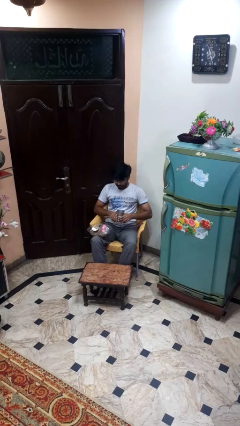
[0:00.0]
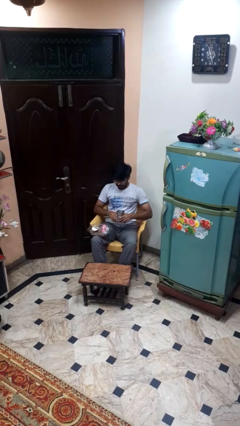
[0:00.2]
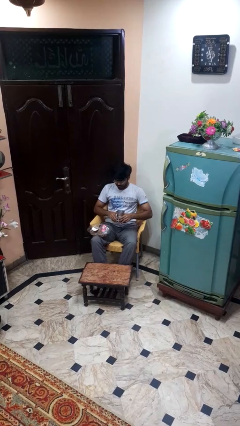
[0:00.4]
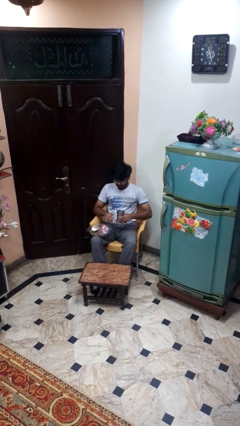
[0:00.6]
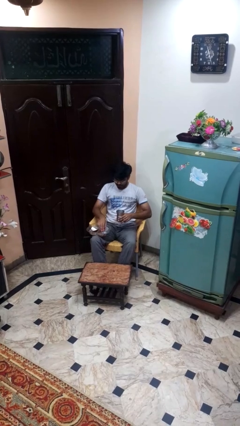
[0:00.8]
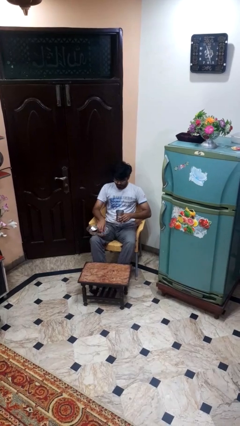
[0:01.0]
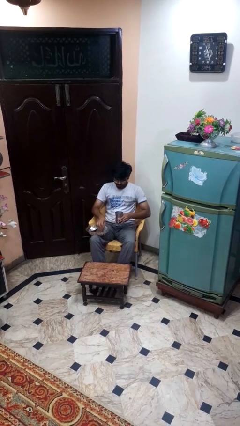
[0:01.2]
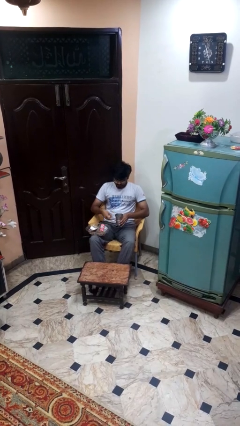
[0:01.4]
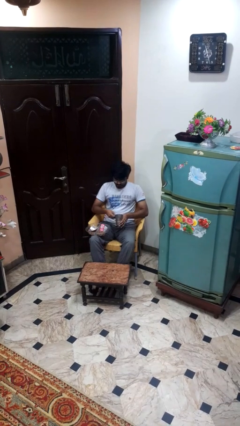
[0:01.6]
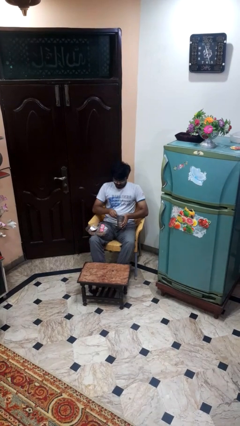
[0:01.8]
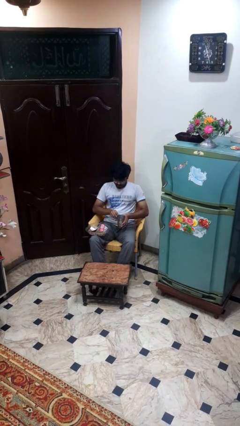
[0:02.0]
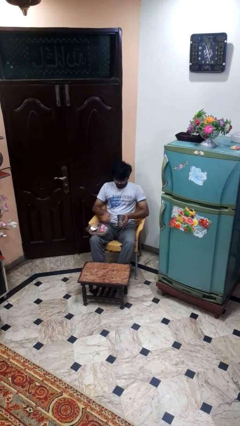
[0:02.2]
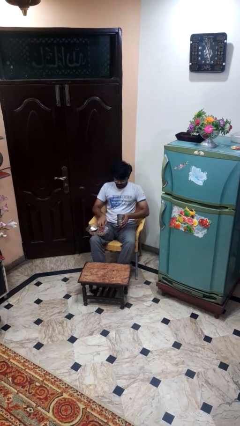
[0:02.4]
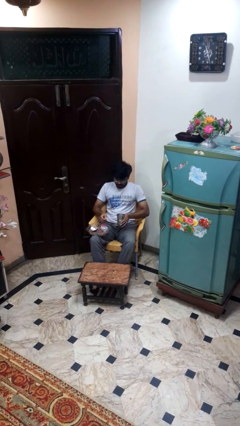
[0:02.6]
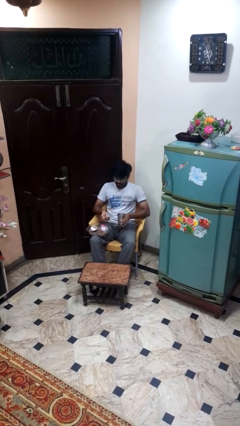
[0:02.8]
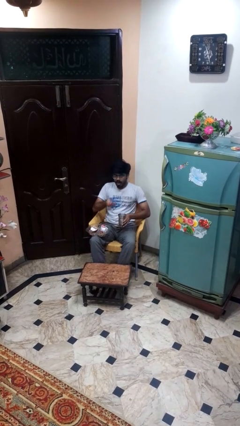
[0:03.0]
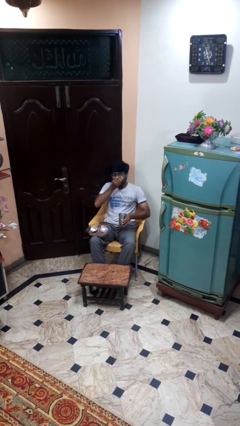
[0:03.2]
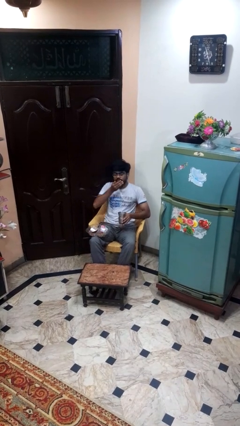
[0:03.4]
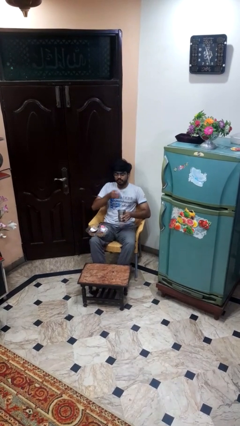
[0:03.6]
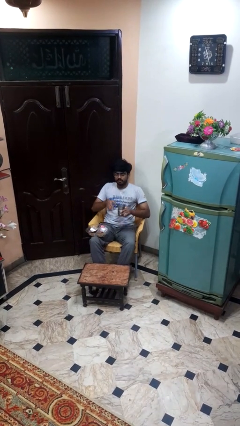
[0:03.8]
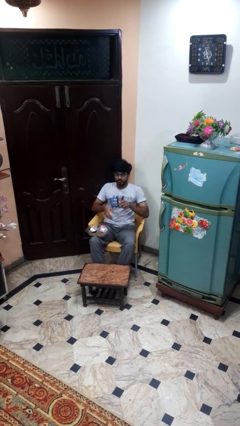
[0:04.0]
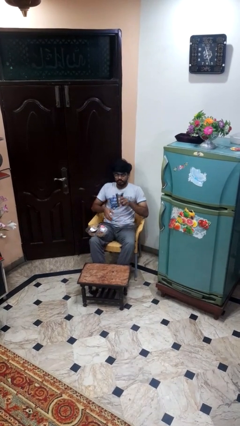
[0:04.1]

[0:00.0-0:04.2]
person takes medicine pills

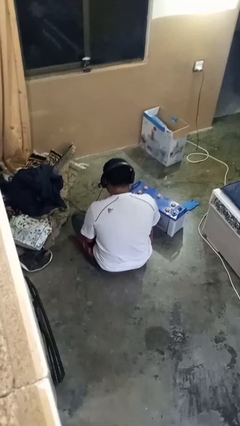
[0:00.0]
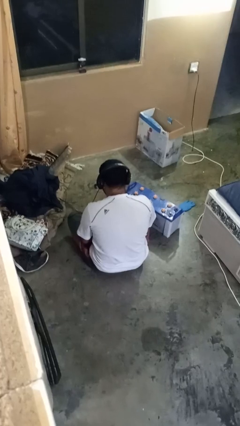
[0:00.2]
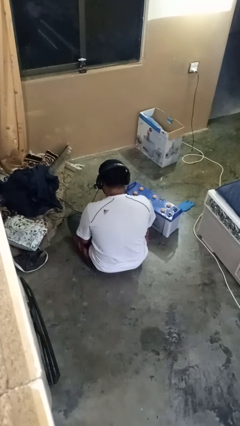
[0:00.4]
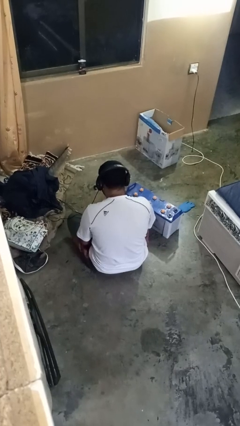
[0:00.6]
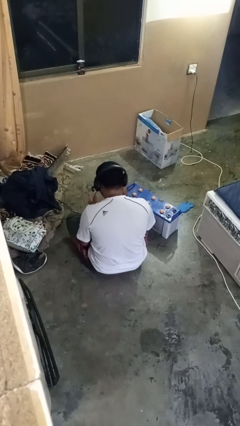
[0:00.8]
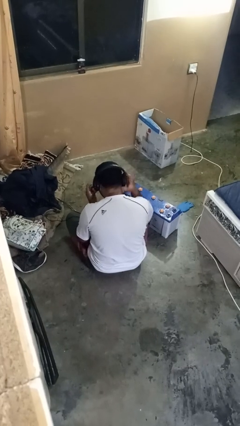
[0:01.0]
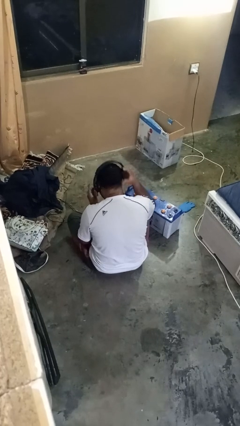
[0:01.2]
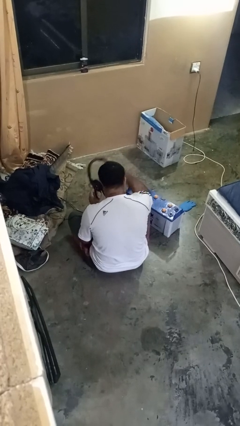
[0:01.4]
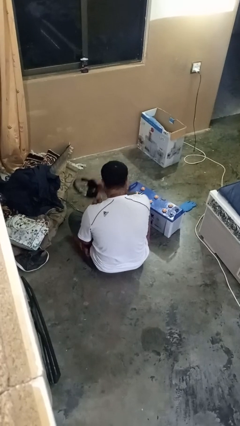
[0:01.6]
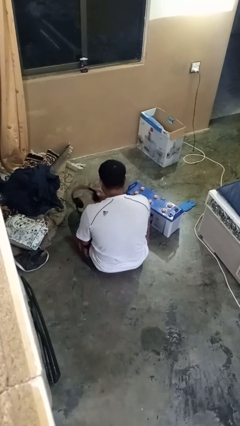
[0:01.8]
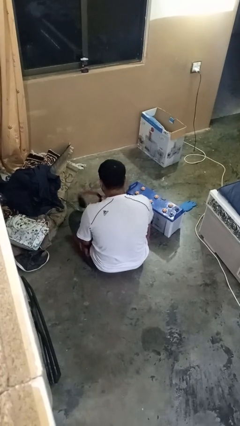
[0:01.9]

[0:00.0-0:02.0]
person takes off headphones

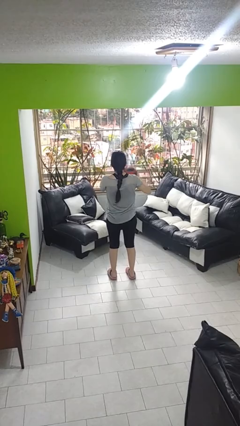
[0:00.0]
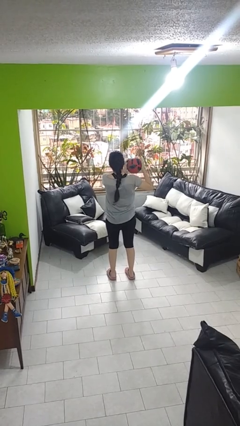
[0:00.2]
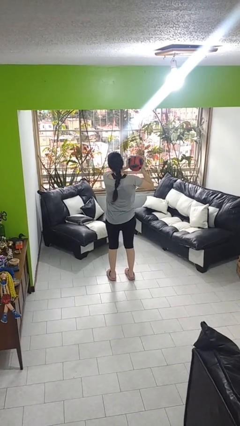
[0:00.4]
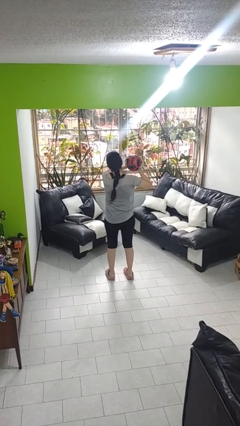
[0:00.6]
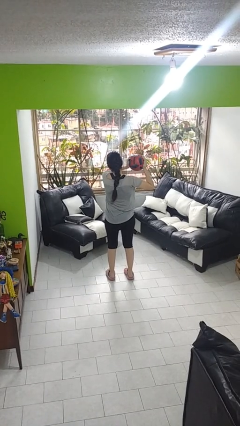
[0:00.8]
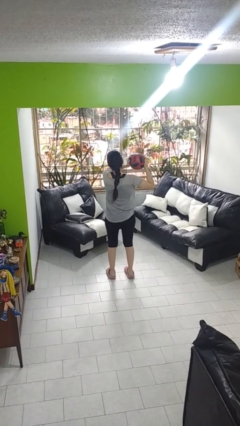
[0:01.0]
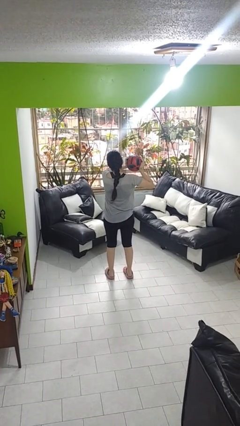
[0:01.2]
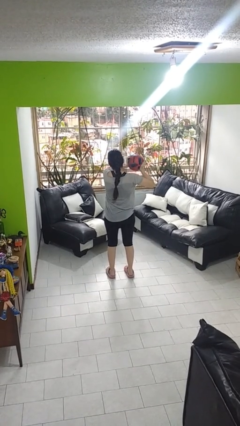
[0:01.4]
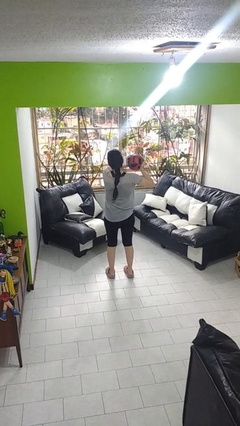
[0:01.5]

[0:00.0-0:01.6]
person squeezes object

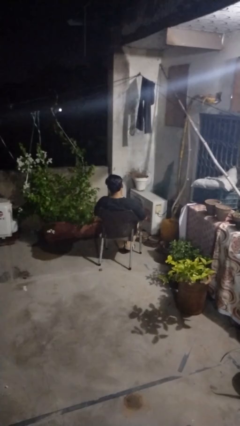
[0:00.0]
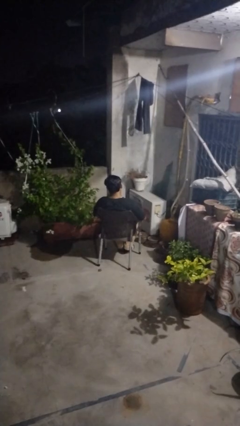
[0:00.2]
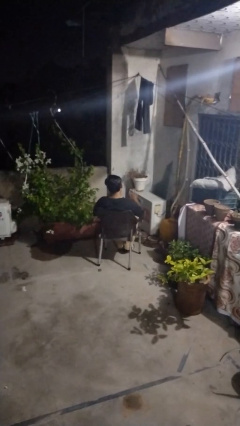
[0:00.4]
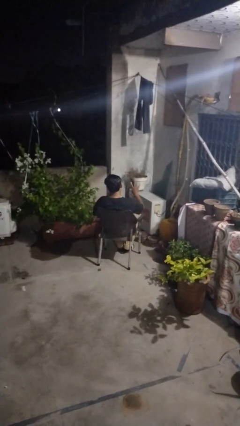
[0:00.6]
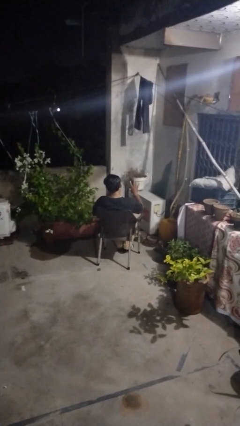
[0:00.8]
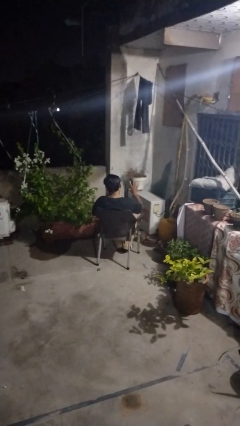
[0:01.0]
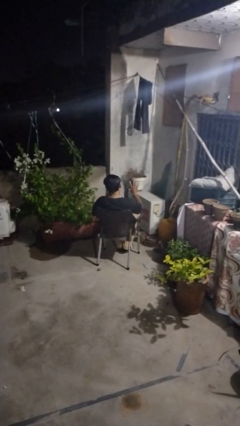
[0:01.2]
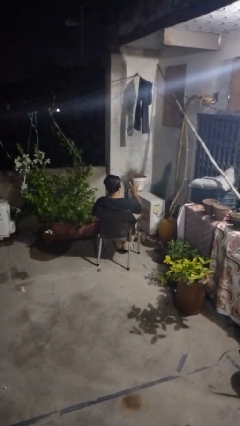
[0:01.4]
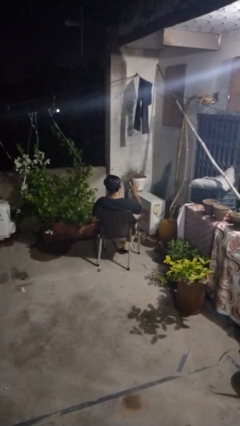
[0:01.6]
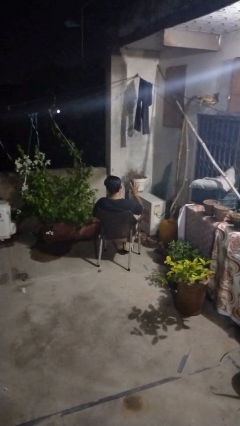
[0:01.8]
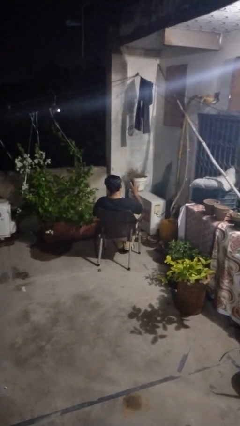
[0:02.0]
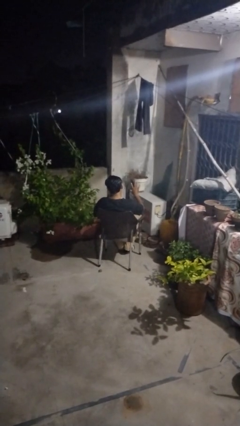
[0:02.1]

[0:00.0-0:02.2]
person gestures number four

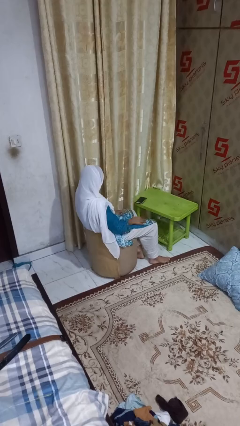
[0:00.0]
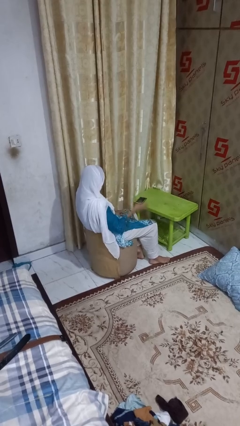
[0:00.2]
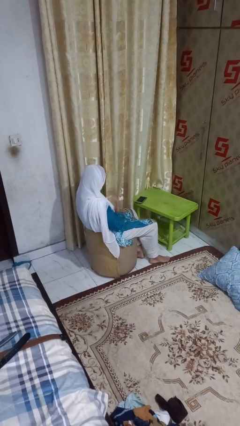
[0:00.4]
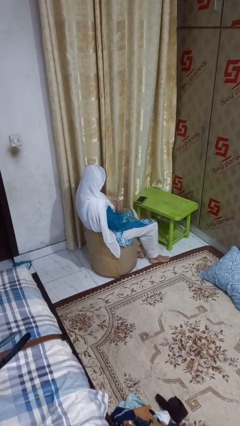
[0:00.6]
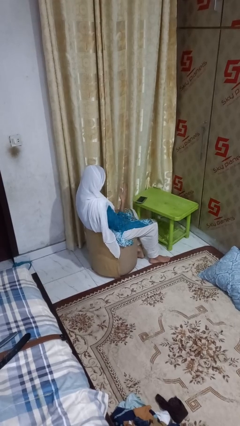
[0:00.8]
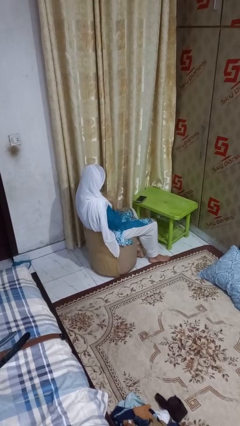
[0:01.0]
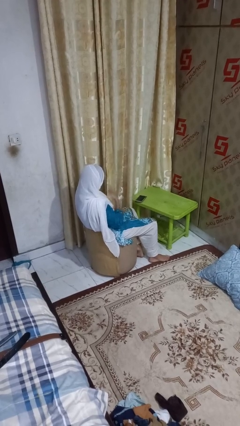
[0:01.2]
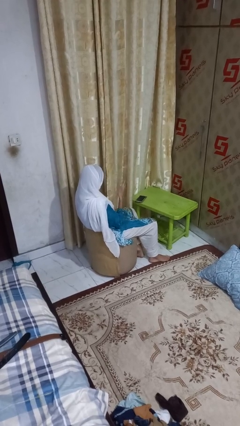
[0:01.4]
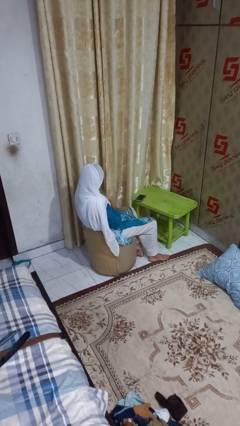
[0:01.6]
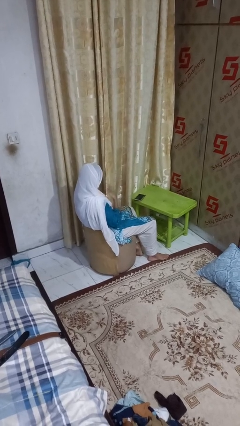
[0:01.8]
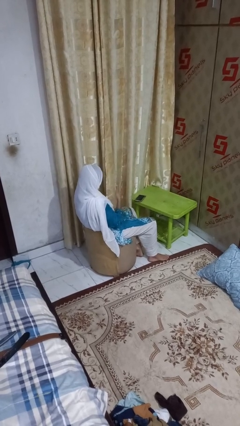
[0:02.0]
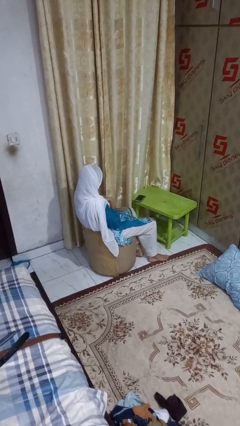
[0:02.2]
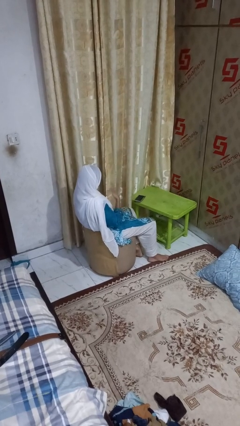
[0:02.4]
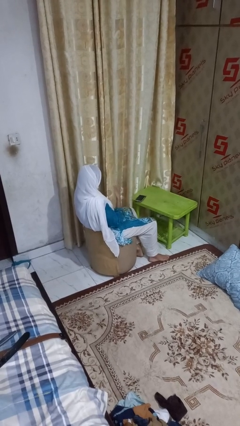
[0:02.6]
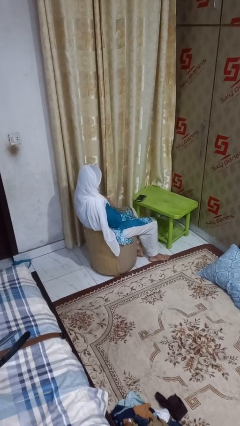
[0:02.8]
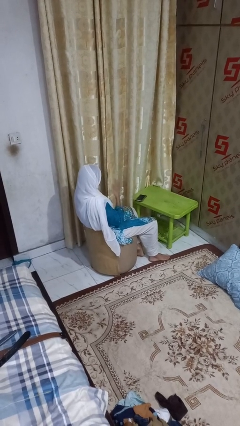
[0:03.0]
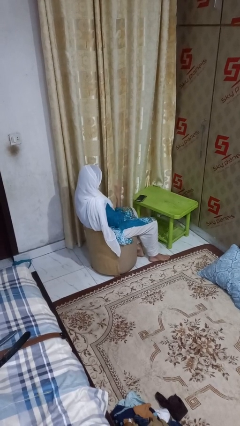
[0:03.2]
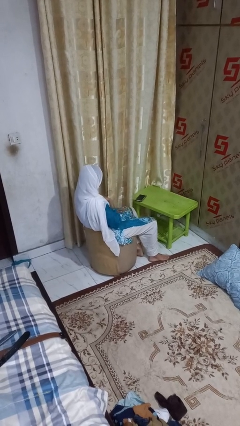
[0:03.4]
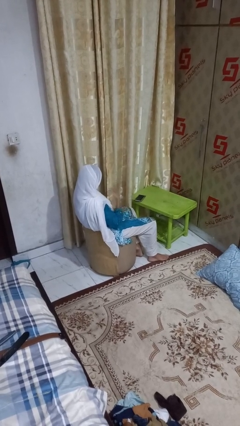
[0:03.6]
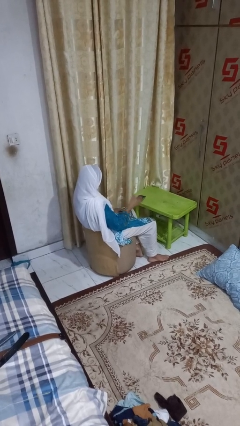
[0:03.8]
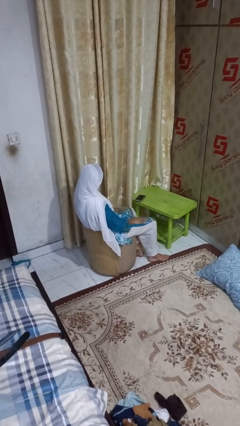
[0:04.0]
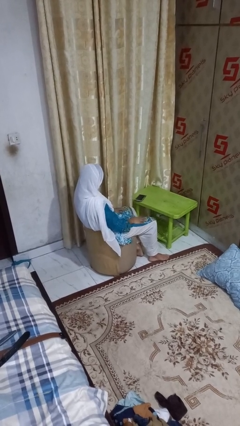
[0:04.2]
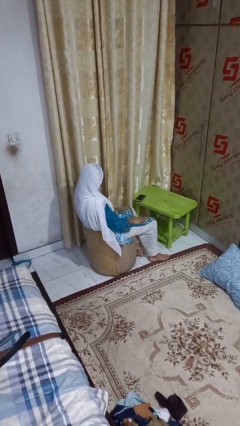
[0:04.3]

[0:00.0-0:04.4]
person drums on chest

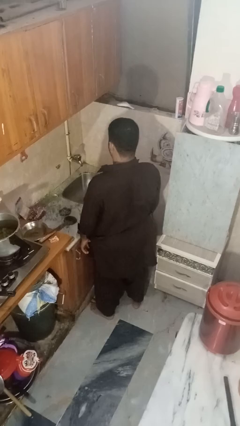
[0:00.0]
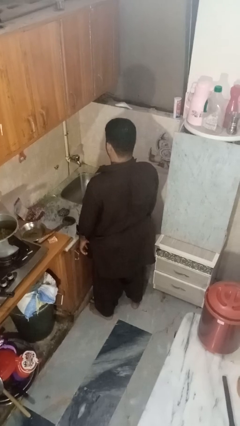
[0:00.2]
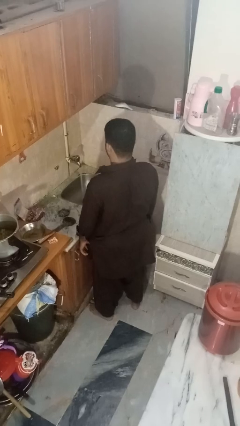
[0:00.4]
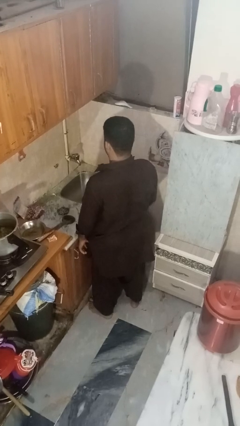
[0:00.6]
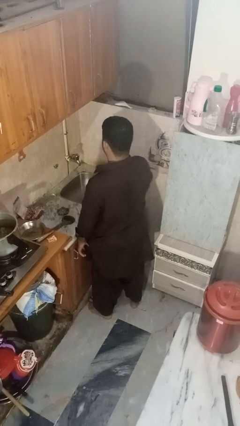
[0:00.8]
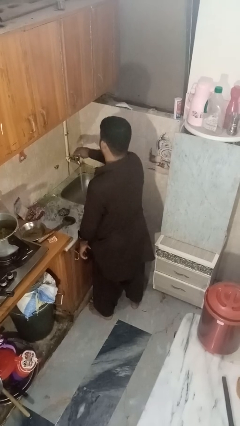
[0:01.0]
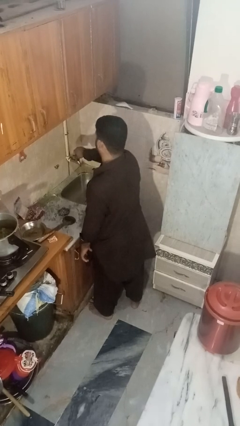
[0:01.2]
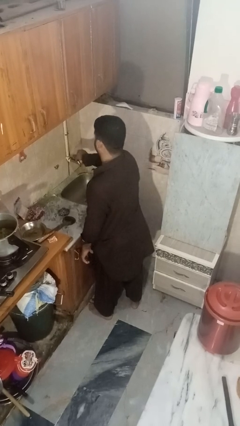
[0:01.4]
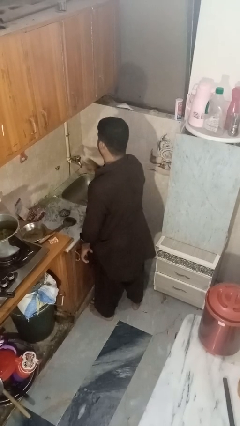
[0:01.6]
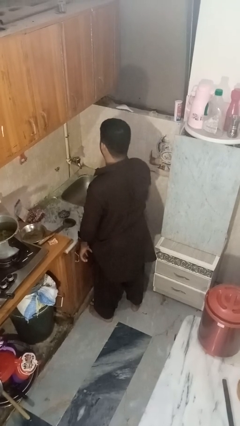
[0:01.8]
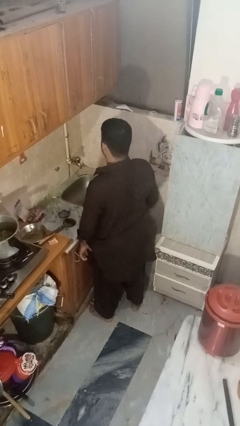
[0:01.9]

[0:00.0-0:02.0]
person turns off faucet

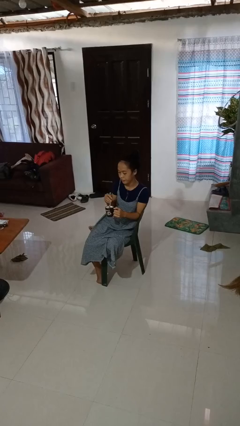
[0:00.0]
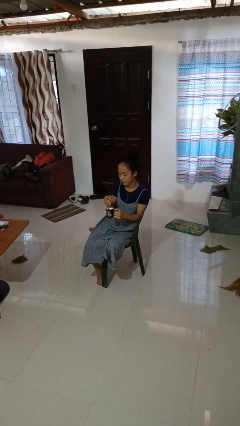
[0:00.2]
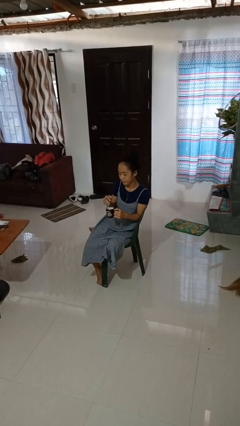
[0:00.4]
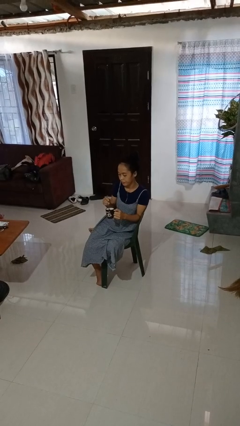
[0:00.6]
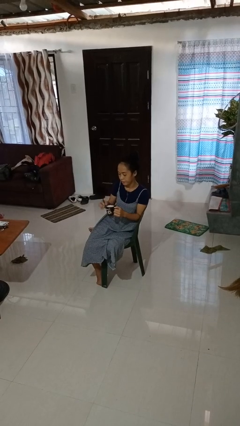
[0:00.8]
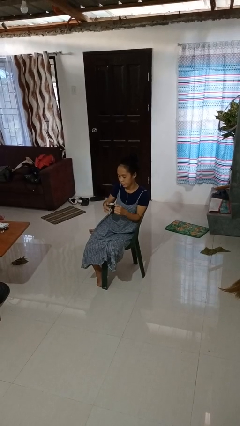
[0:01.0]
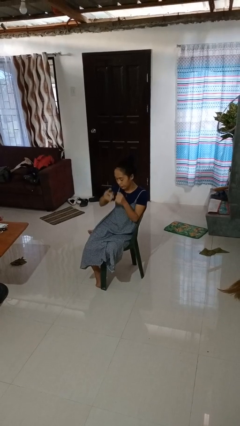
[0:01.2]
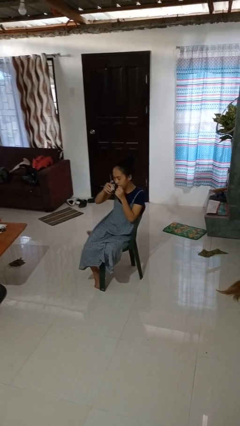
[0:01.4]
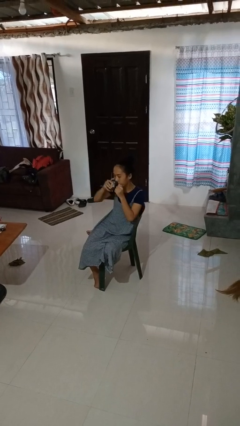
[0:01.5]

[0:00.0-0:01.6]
person stirs mug
